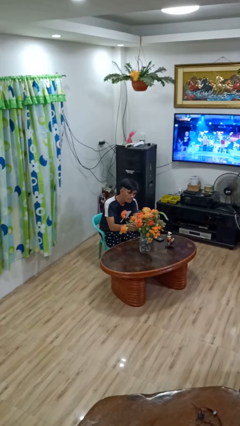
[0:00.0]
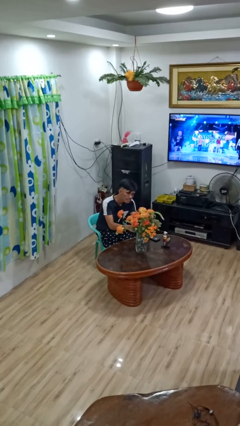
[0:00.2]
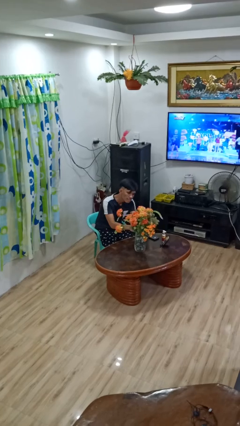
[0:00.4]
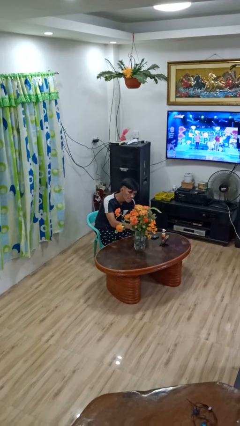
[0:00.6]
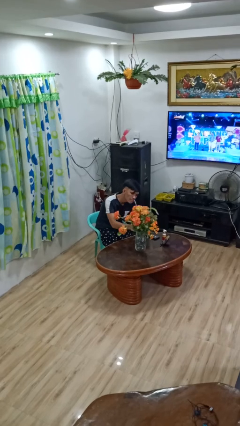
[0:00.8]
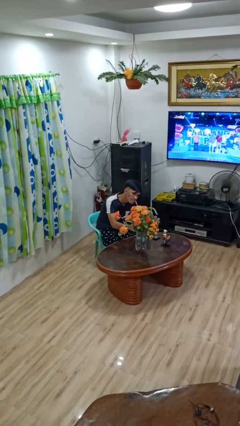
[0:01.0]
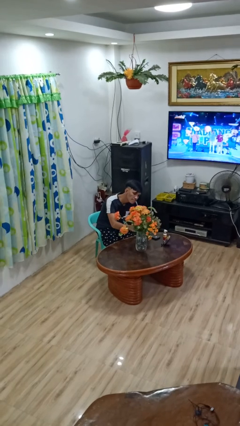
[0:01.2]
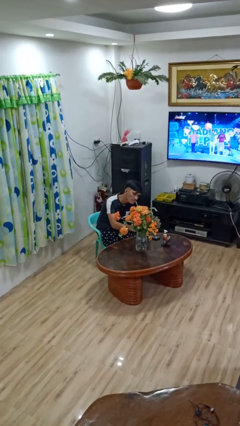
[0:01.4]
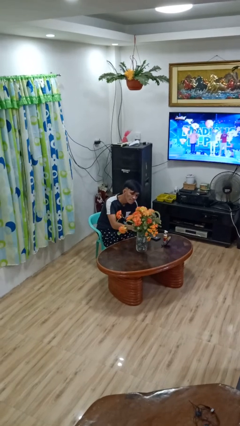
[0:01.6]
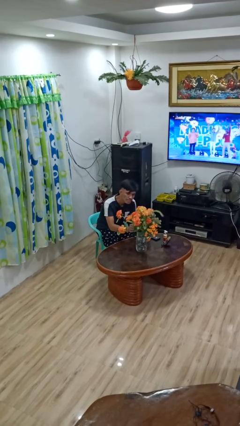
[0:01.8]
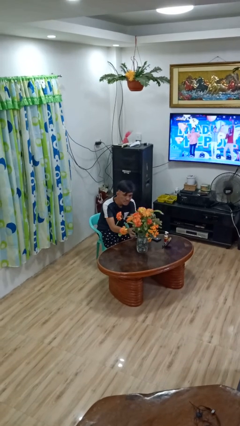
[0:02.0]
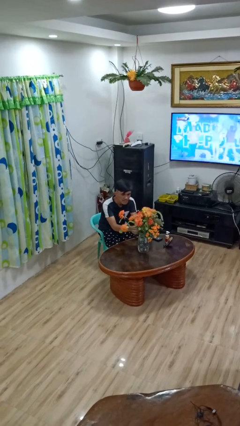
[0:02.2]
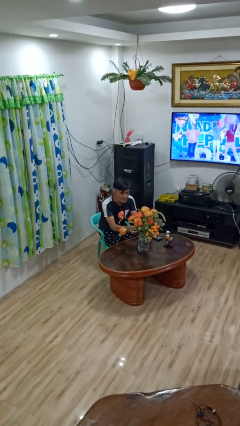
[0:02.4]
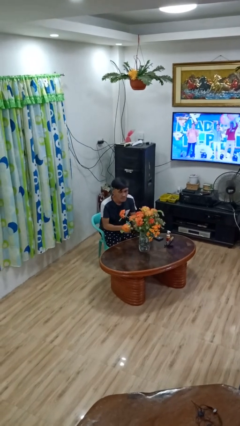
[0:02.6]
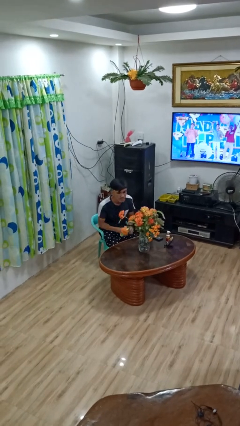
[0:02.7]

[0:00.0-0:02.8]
person arranges flowers in vase

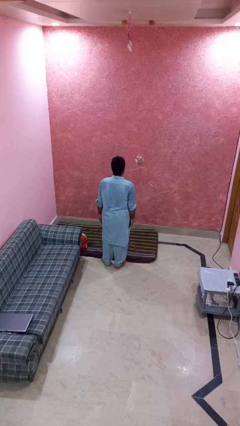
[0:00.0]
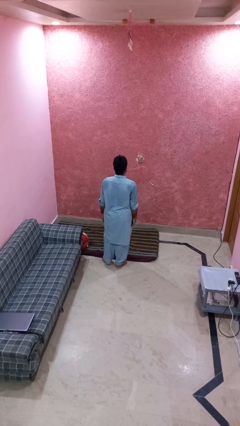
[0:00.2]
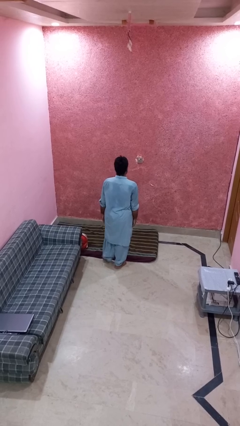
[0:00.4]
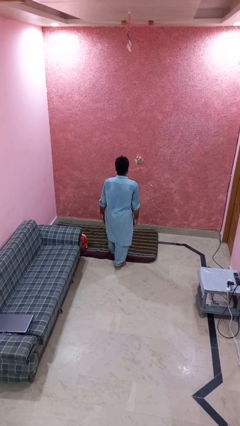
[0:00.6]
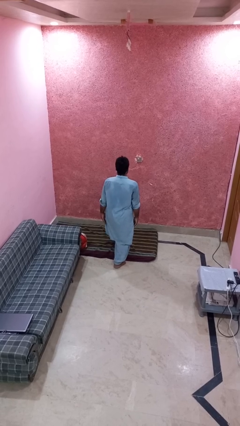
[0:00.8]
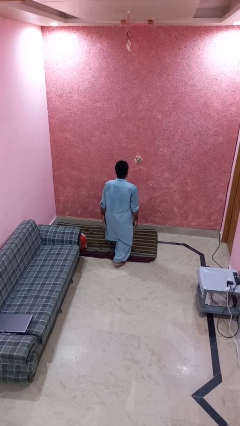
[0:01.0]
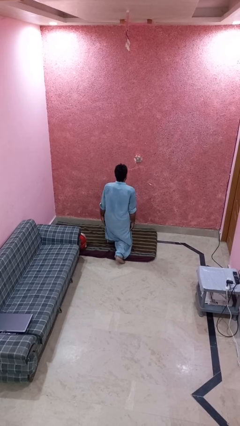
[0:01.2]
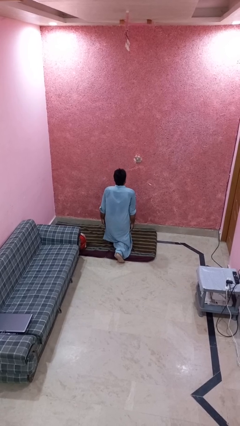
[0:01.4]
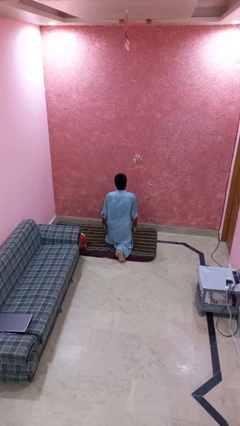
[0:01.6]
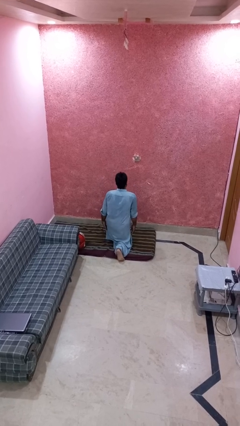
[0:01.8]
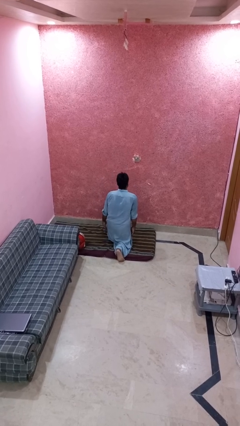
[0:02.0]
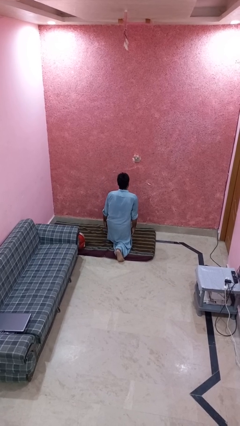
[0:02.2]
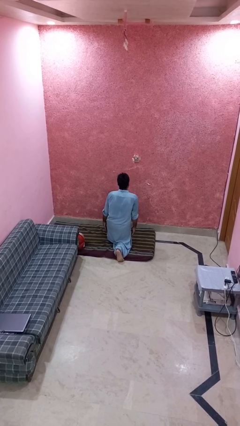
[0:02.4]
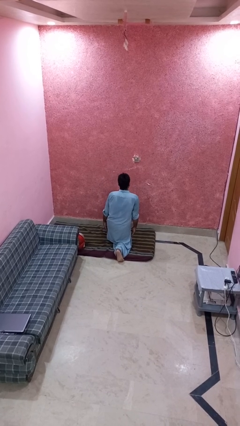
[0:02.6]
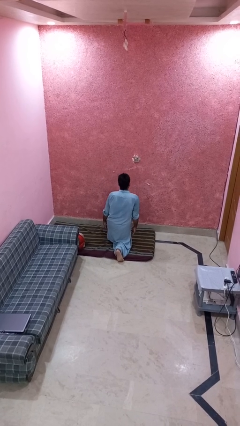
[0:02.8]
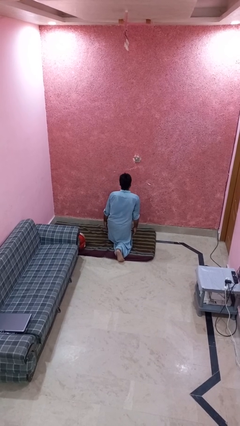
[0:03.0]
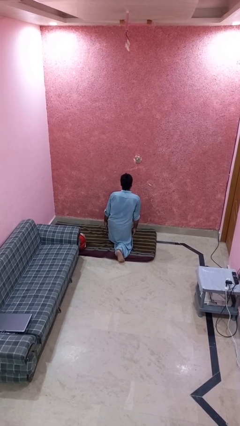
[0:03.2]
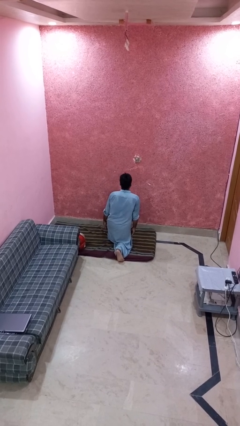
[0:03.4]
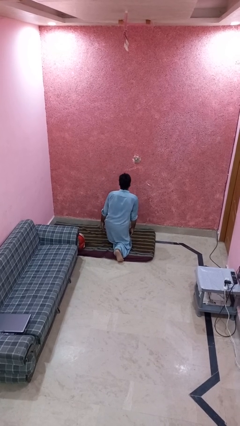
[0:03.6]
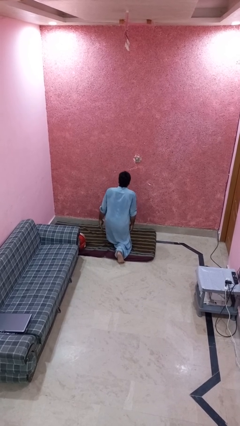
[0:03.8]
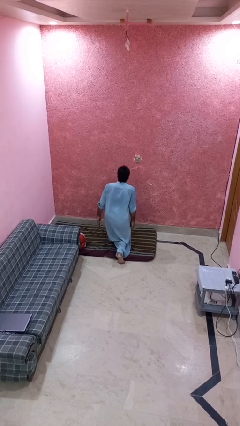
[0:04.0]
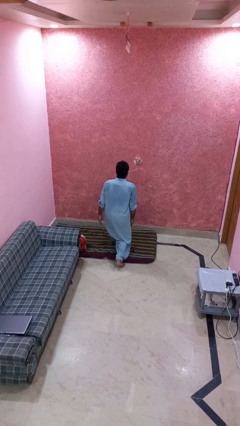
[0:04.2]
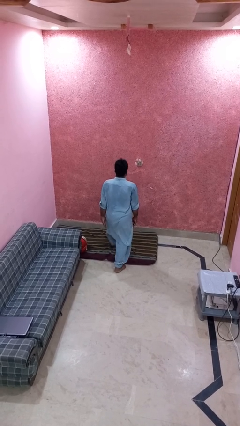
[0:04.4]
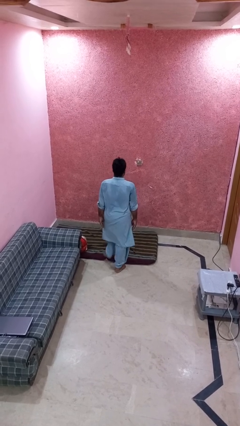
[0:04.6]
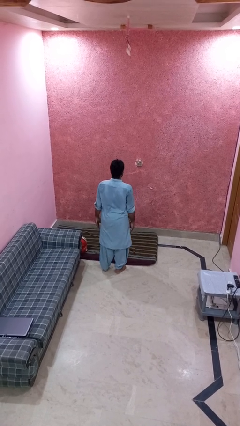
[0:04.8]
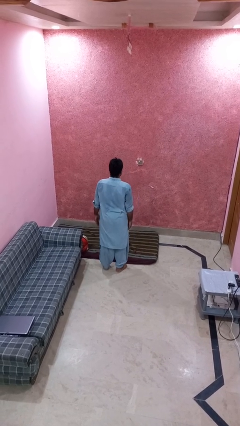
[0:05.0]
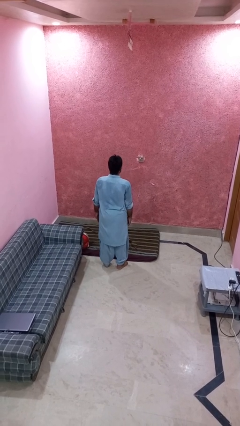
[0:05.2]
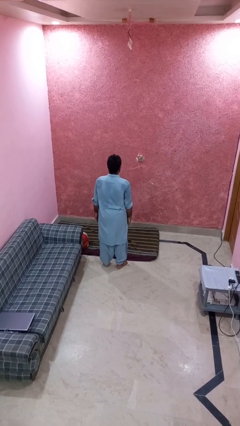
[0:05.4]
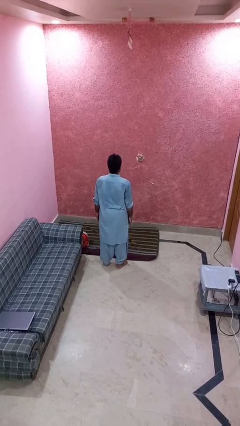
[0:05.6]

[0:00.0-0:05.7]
person exercises with lunges

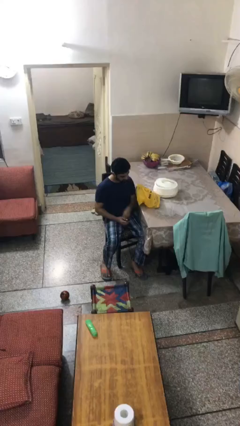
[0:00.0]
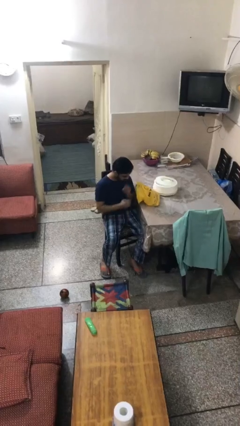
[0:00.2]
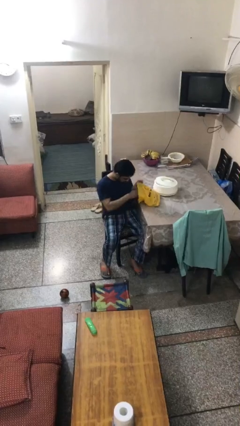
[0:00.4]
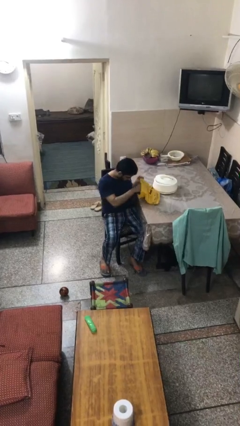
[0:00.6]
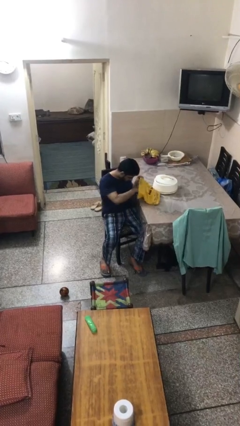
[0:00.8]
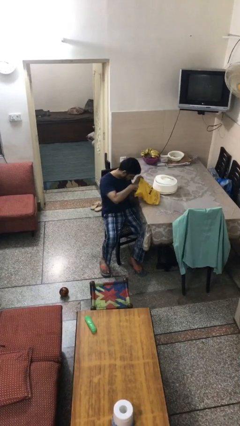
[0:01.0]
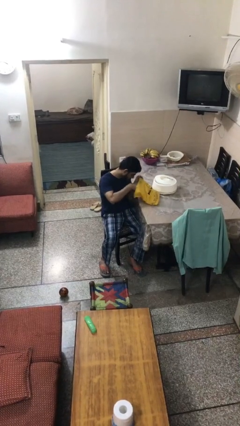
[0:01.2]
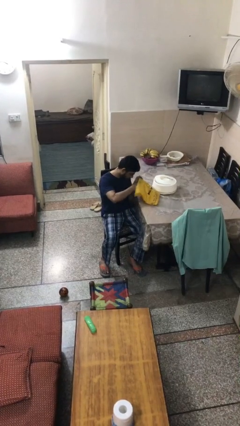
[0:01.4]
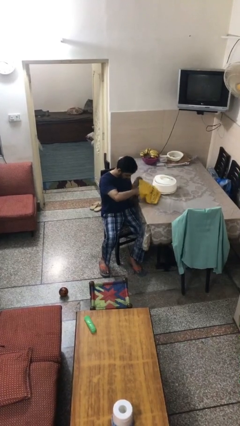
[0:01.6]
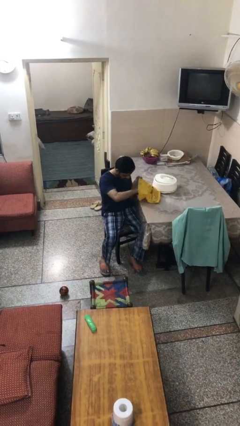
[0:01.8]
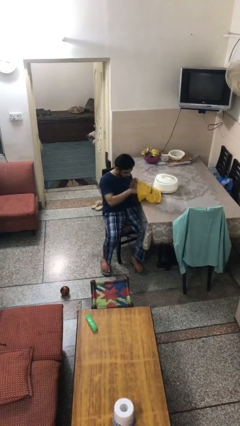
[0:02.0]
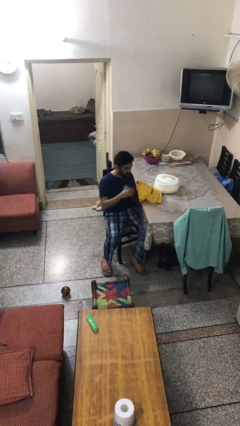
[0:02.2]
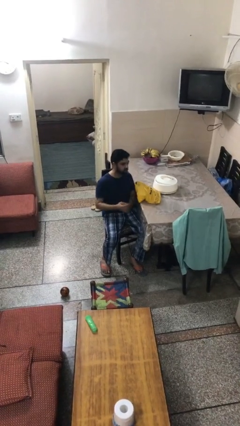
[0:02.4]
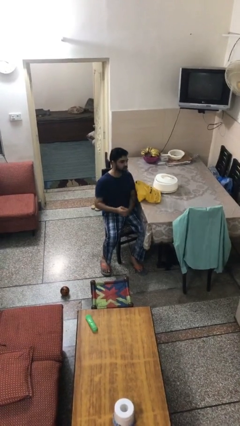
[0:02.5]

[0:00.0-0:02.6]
person searches in bag

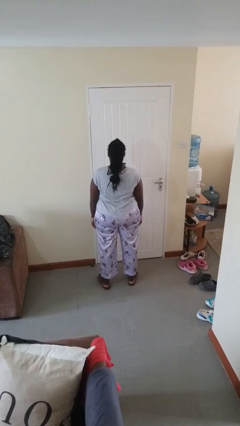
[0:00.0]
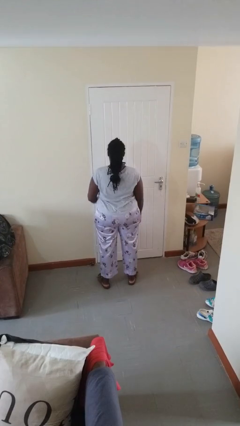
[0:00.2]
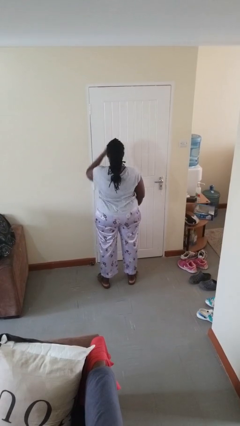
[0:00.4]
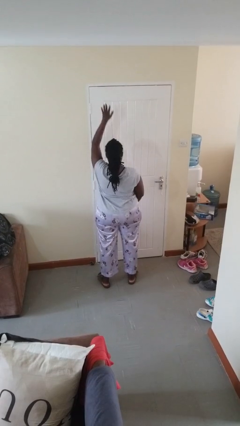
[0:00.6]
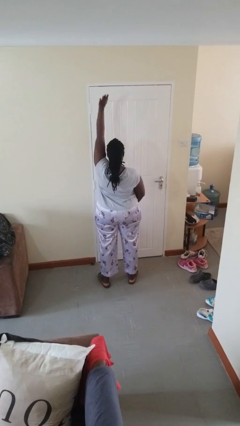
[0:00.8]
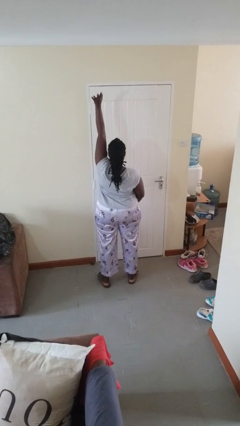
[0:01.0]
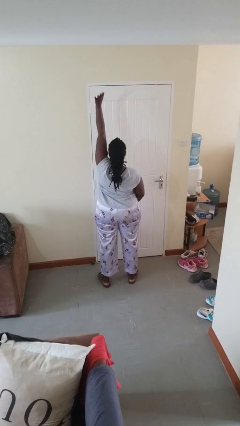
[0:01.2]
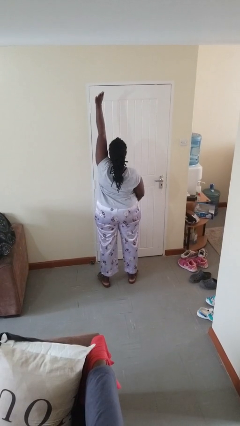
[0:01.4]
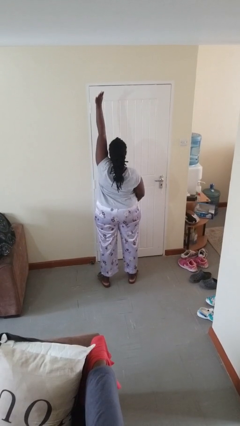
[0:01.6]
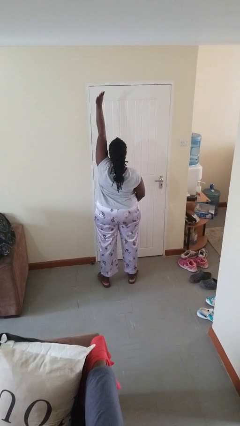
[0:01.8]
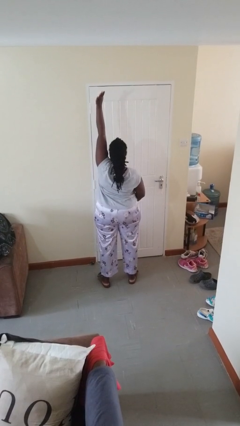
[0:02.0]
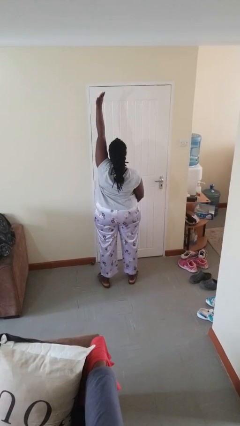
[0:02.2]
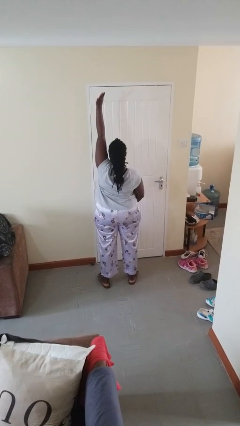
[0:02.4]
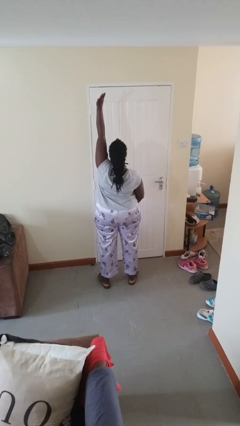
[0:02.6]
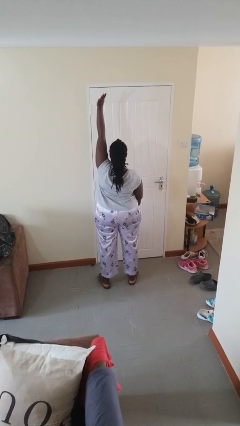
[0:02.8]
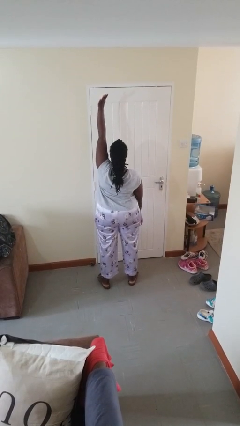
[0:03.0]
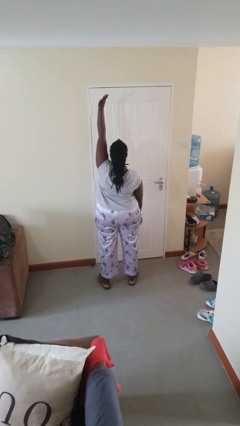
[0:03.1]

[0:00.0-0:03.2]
person gestures raise hand

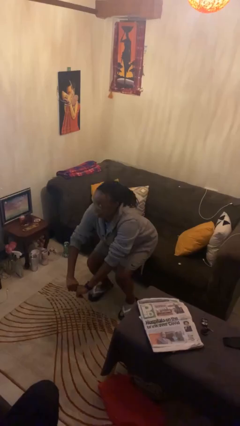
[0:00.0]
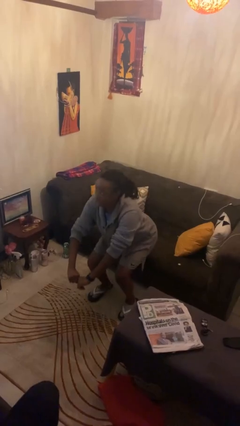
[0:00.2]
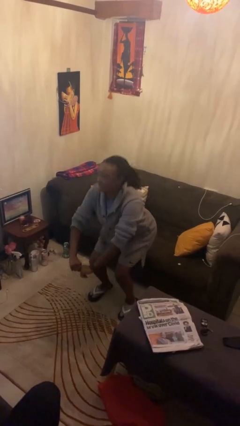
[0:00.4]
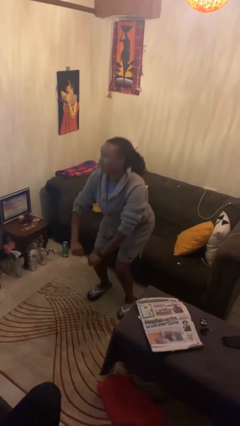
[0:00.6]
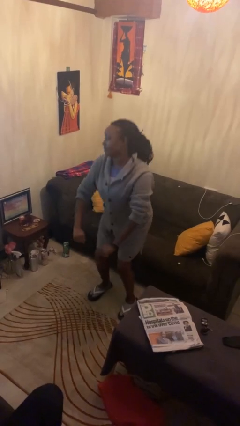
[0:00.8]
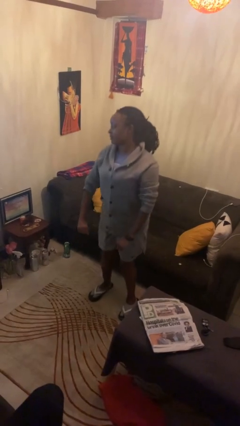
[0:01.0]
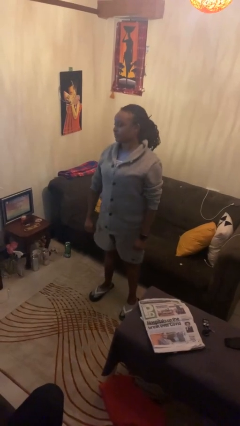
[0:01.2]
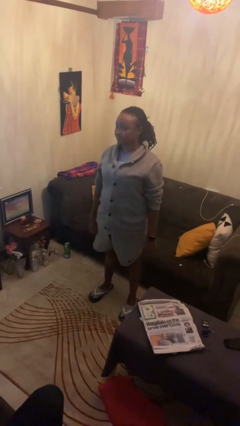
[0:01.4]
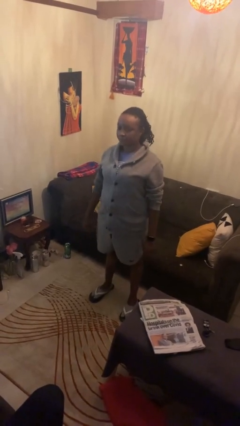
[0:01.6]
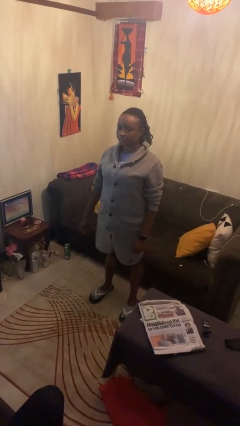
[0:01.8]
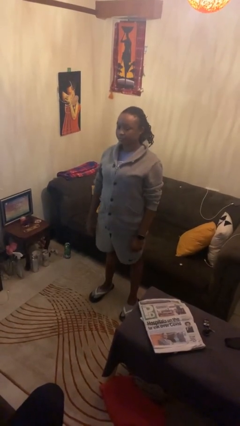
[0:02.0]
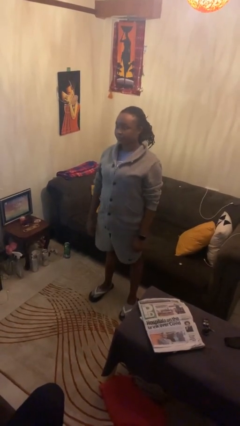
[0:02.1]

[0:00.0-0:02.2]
person stands up

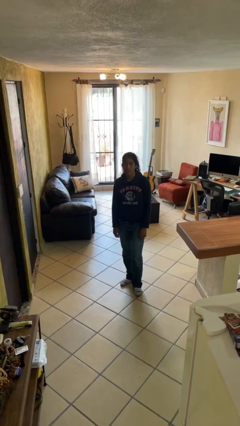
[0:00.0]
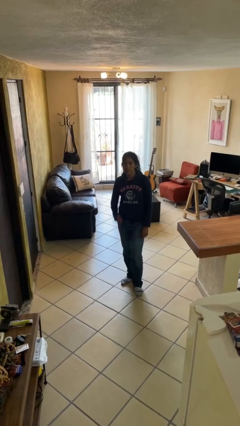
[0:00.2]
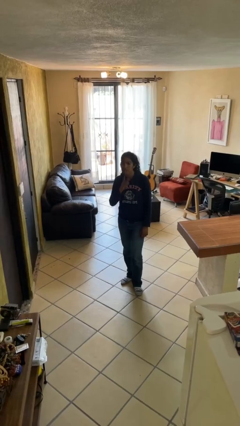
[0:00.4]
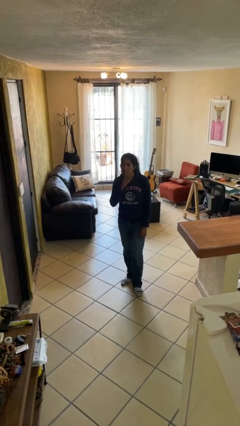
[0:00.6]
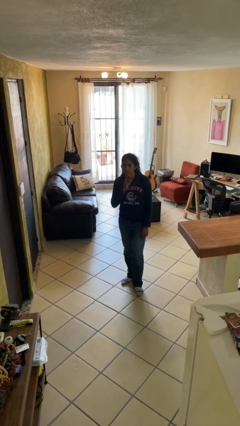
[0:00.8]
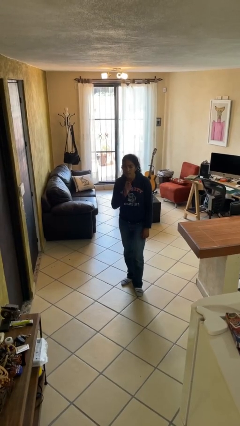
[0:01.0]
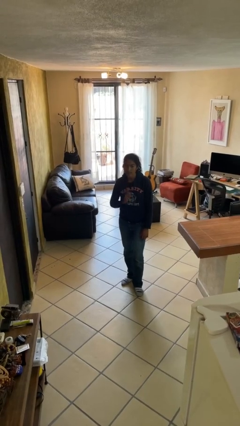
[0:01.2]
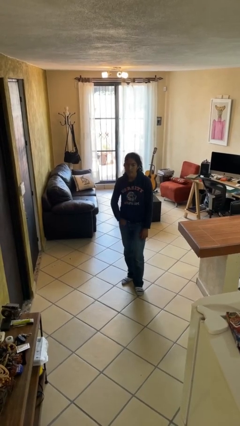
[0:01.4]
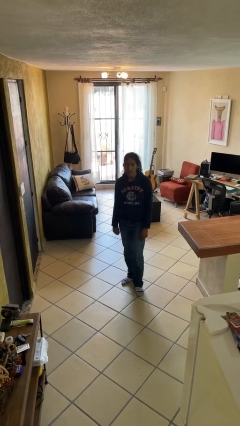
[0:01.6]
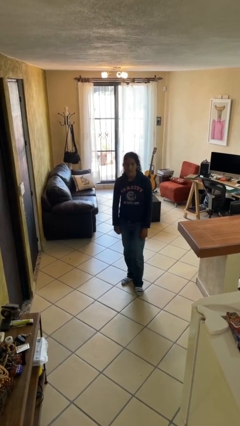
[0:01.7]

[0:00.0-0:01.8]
person gestures be quiet
